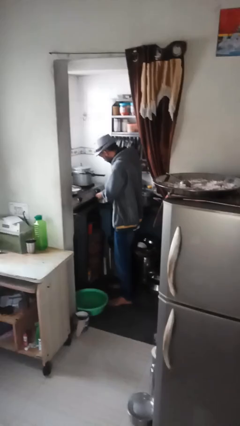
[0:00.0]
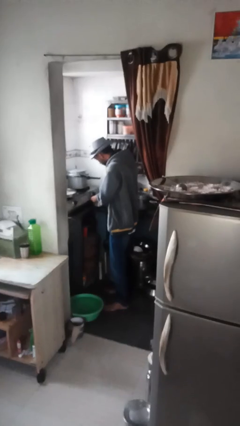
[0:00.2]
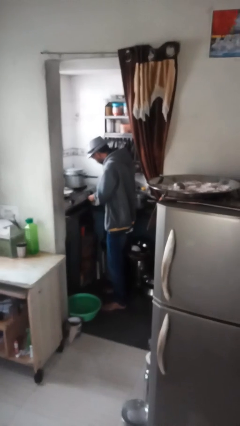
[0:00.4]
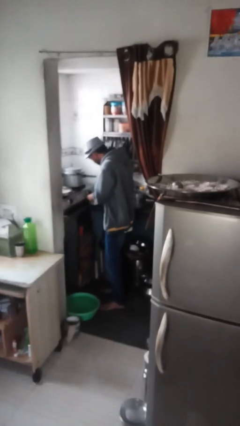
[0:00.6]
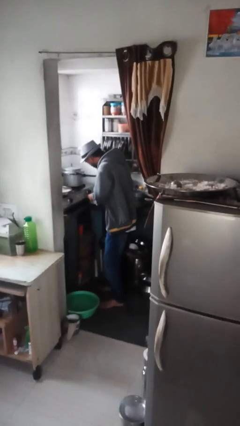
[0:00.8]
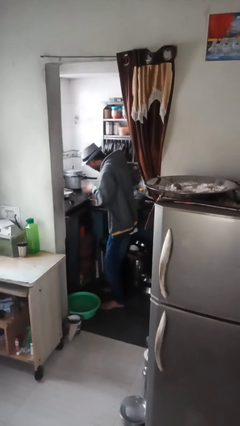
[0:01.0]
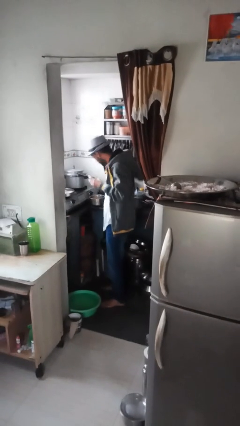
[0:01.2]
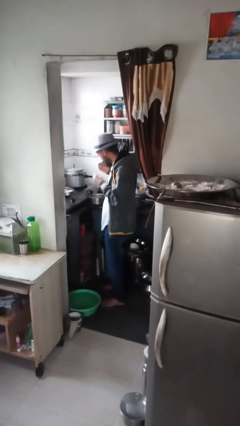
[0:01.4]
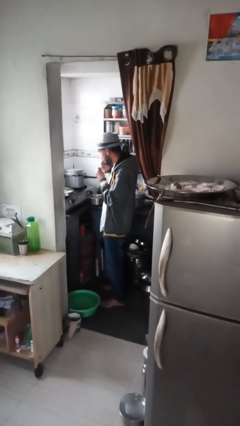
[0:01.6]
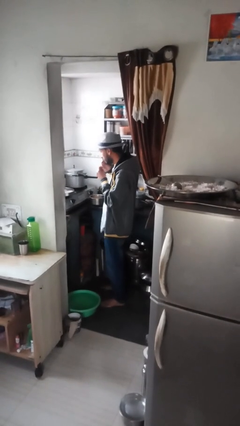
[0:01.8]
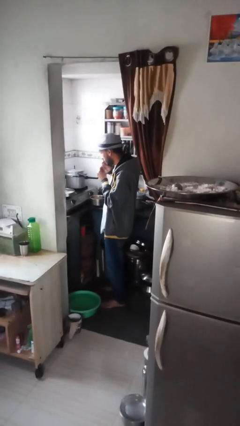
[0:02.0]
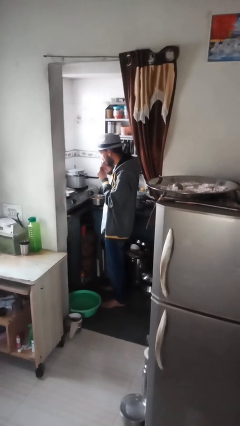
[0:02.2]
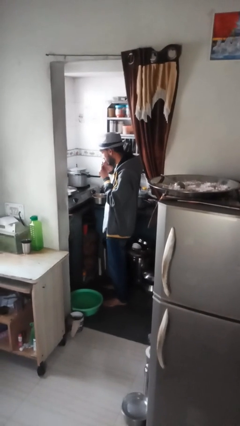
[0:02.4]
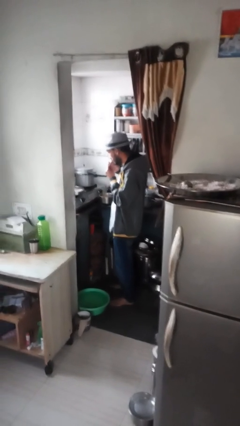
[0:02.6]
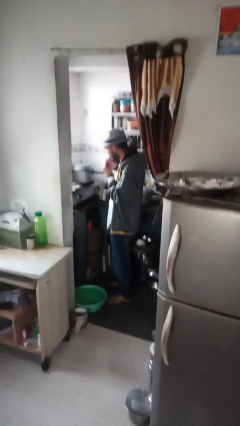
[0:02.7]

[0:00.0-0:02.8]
person burns hand

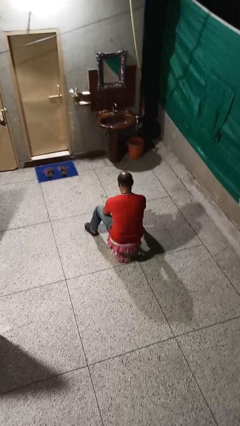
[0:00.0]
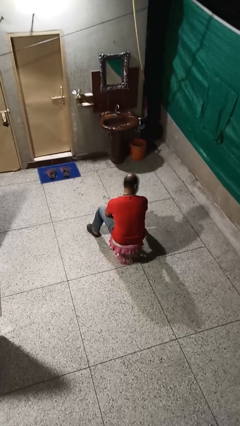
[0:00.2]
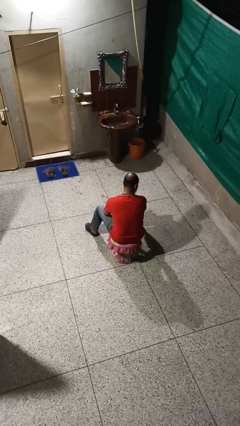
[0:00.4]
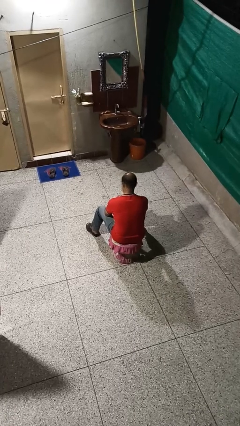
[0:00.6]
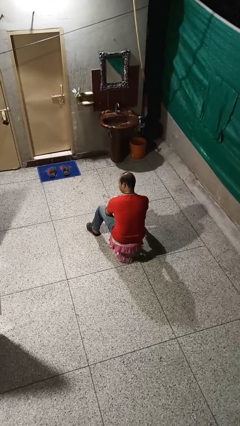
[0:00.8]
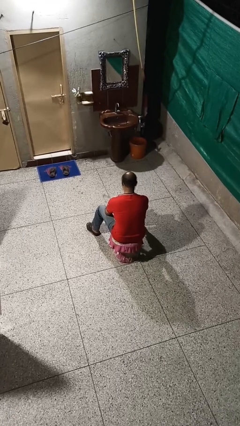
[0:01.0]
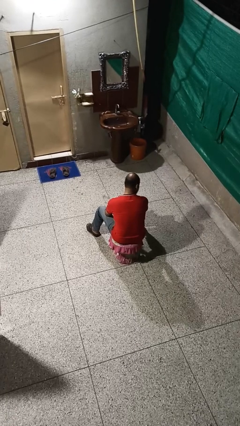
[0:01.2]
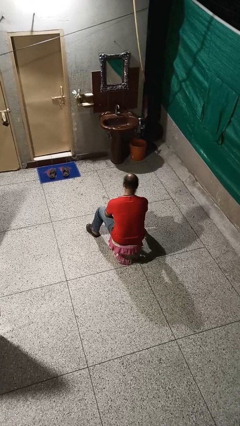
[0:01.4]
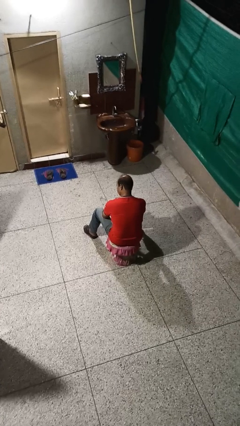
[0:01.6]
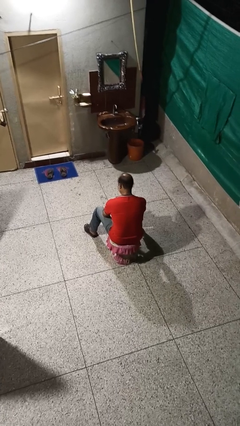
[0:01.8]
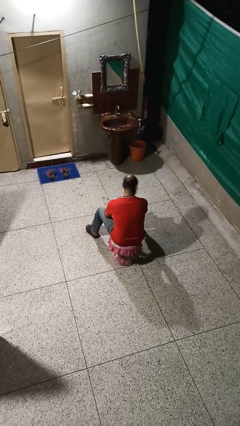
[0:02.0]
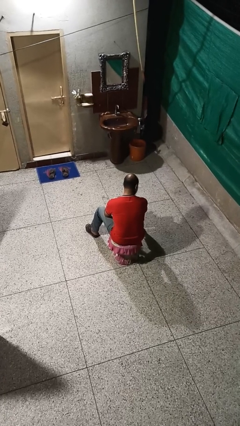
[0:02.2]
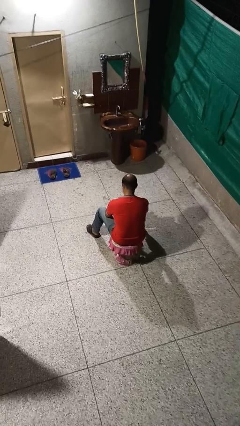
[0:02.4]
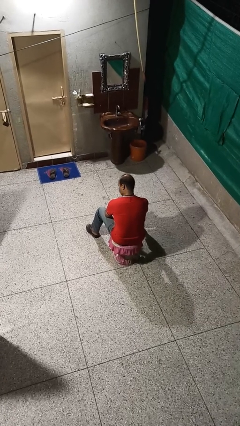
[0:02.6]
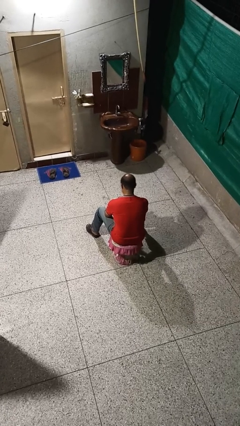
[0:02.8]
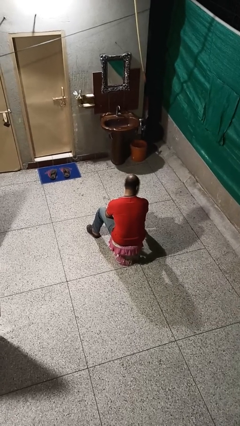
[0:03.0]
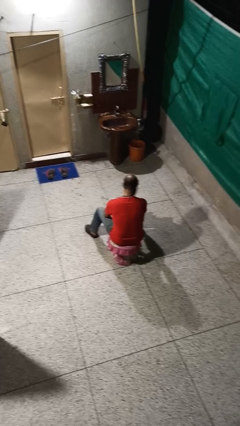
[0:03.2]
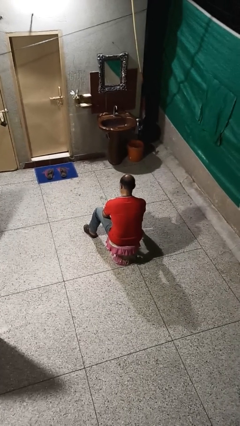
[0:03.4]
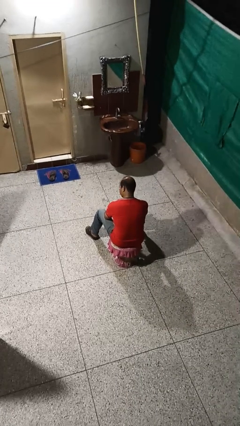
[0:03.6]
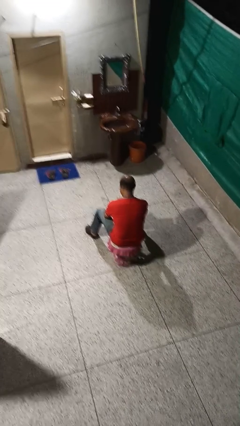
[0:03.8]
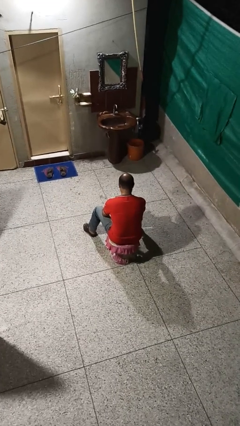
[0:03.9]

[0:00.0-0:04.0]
person shakes head

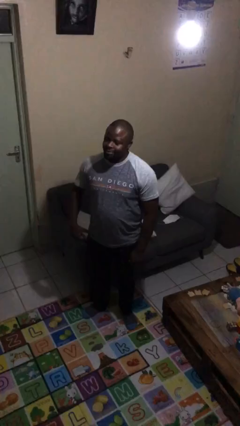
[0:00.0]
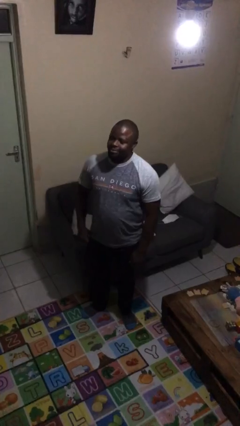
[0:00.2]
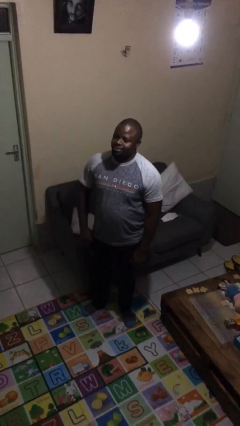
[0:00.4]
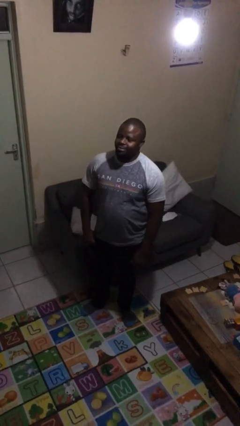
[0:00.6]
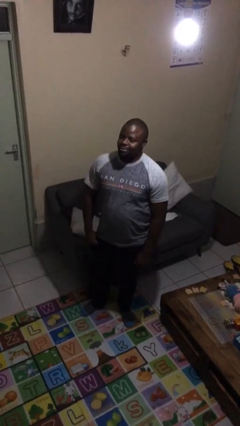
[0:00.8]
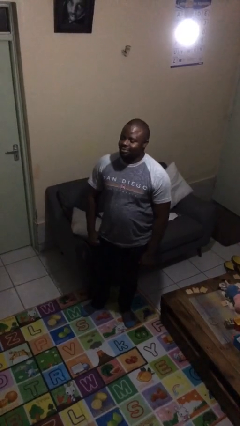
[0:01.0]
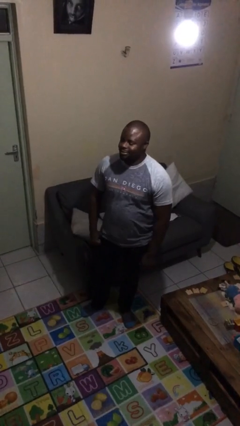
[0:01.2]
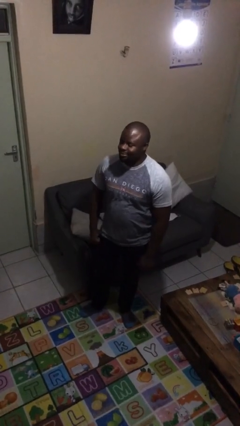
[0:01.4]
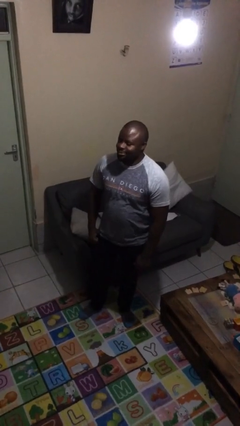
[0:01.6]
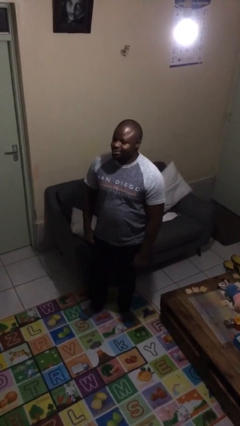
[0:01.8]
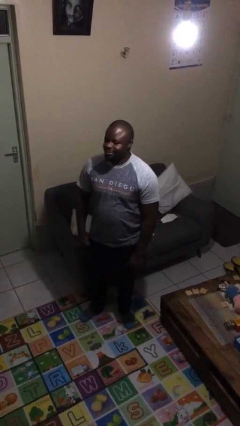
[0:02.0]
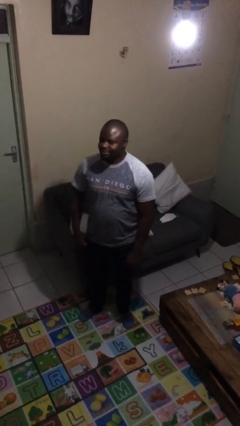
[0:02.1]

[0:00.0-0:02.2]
person gestures thumbs up

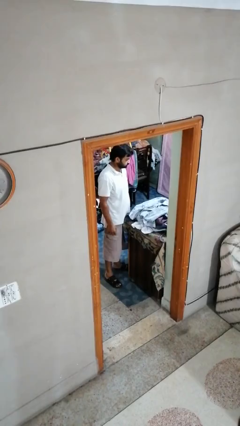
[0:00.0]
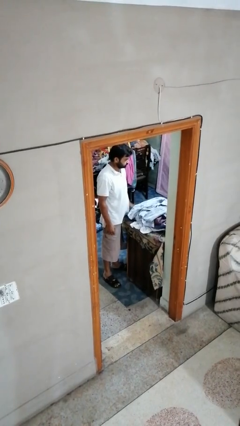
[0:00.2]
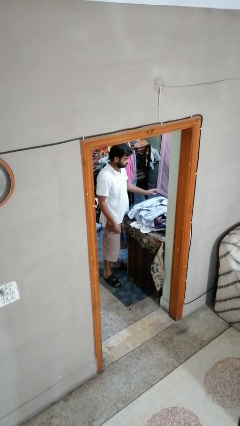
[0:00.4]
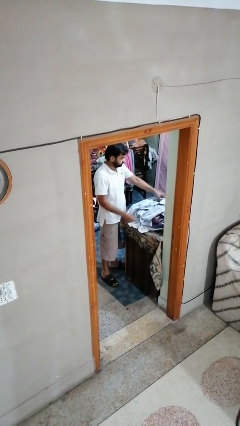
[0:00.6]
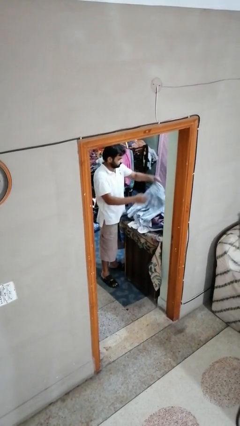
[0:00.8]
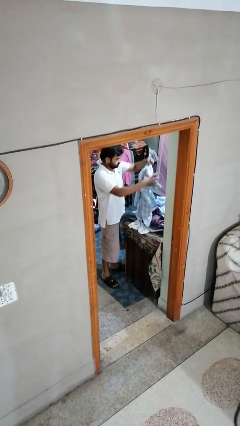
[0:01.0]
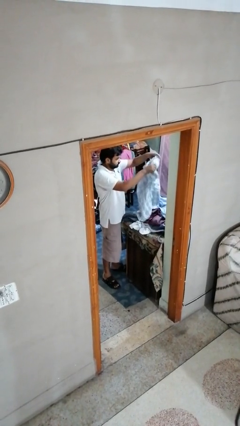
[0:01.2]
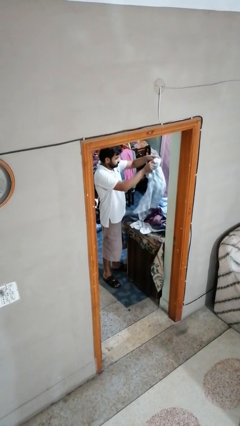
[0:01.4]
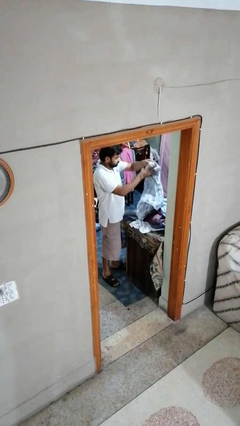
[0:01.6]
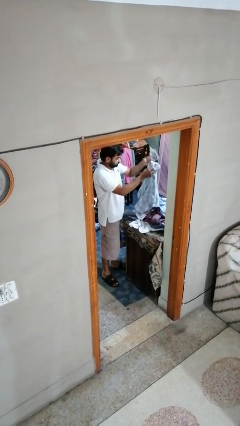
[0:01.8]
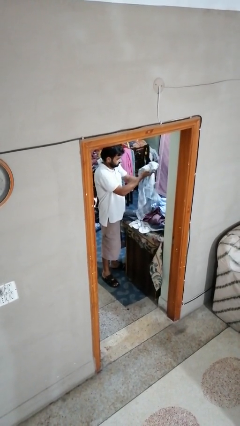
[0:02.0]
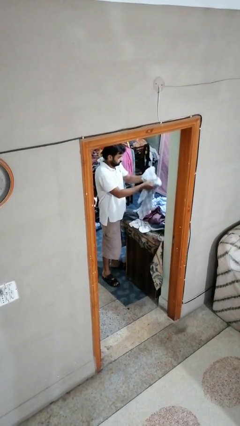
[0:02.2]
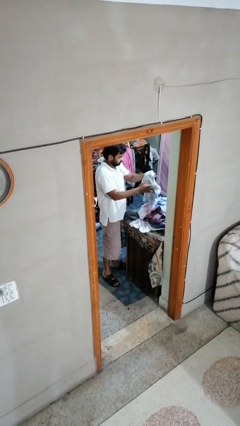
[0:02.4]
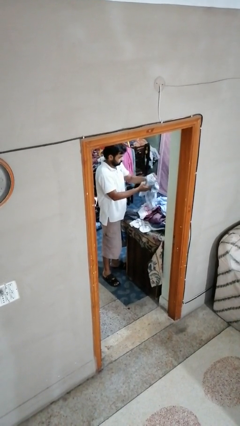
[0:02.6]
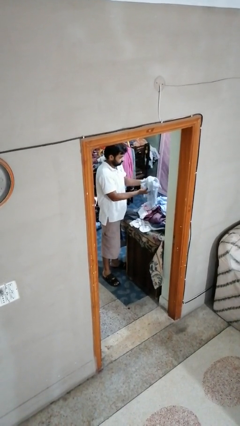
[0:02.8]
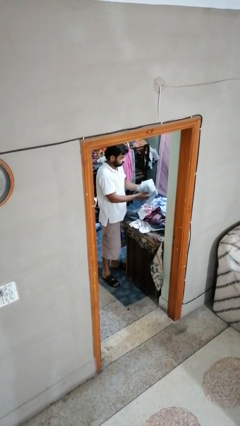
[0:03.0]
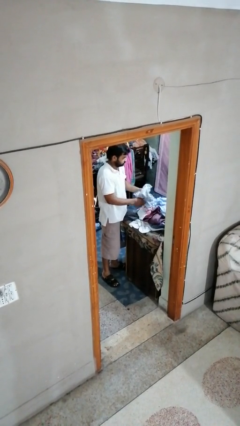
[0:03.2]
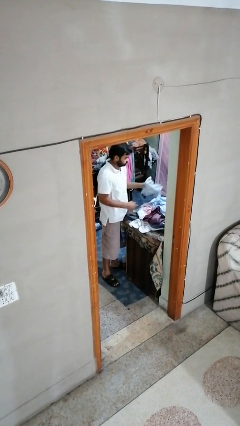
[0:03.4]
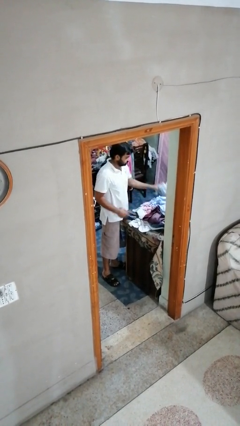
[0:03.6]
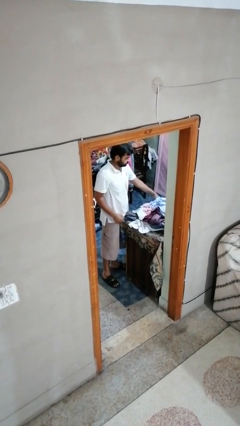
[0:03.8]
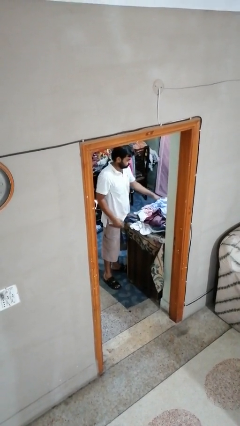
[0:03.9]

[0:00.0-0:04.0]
person folds shirt

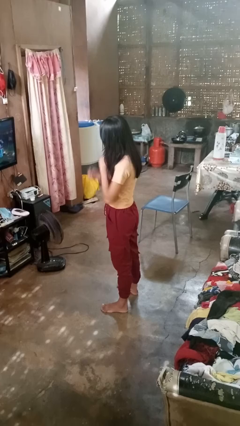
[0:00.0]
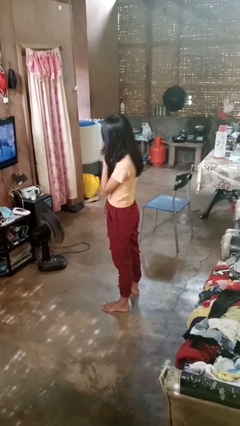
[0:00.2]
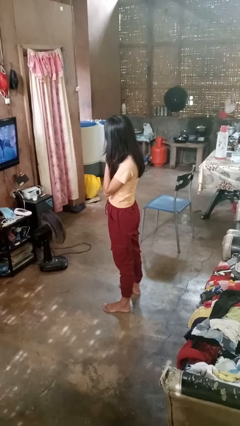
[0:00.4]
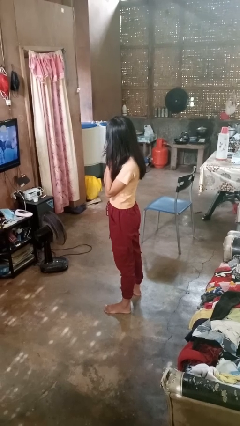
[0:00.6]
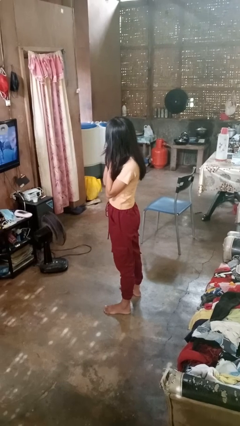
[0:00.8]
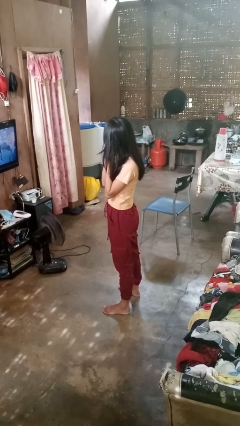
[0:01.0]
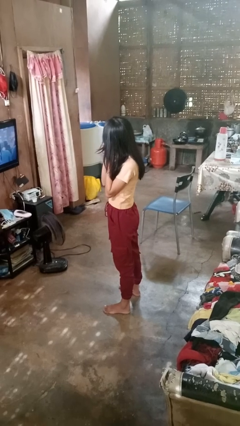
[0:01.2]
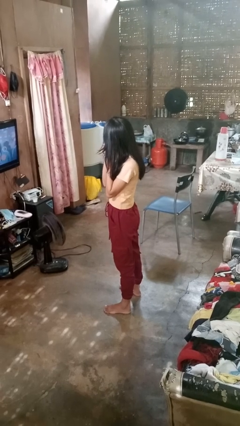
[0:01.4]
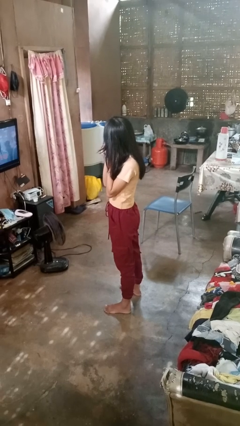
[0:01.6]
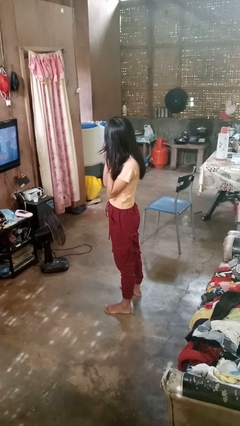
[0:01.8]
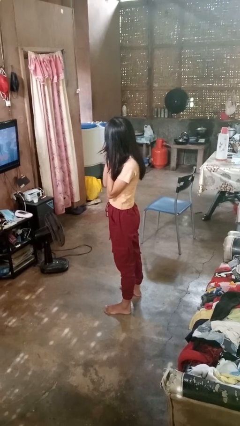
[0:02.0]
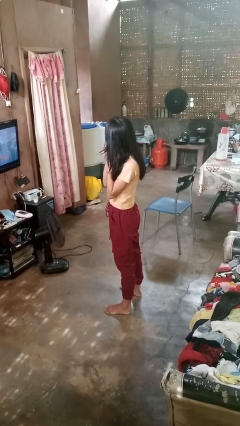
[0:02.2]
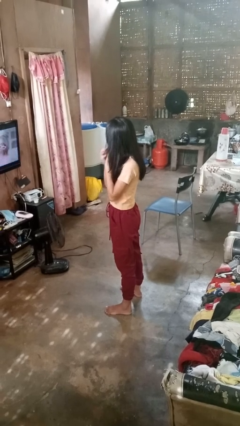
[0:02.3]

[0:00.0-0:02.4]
person puts on earrings

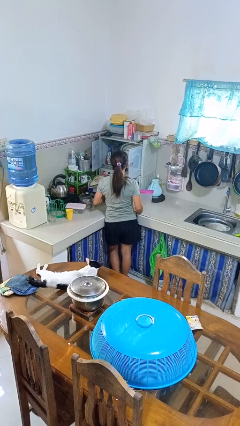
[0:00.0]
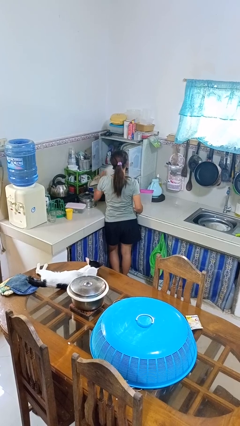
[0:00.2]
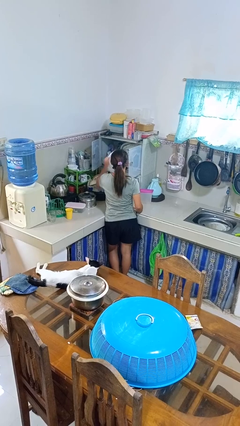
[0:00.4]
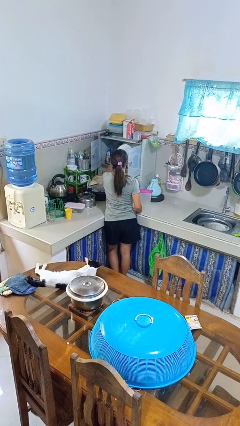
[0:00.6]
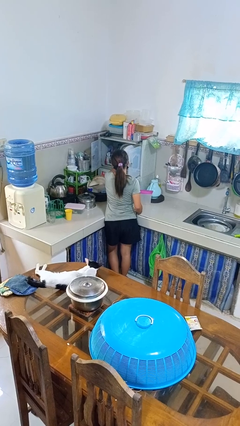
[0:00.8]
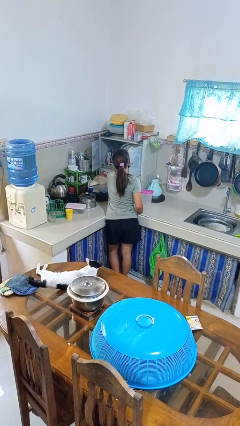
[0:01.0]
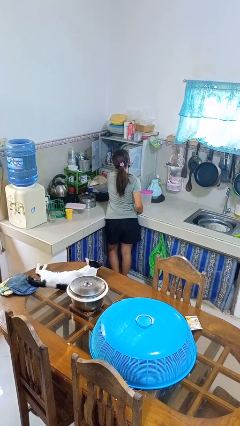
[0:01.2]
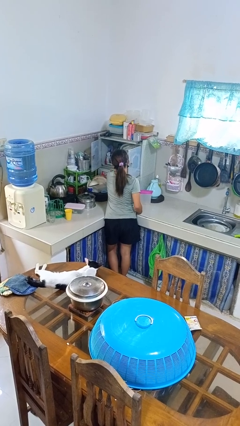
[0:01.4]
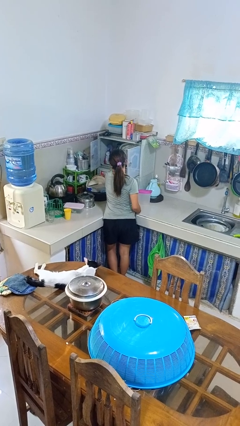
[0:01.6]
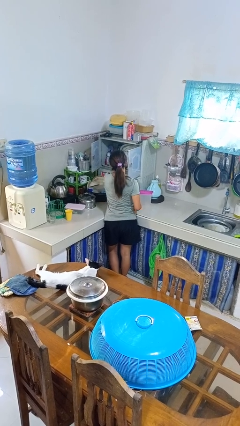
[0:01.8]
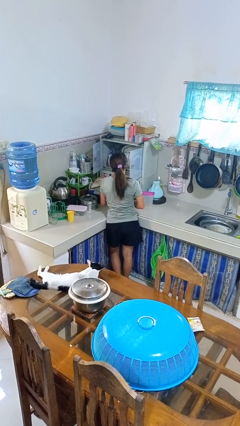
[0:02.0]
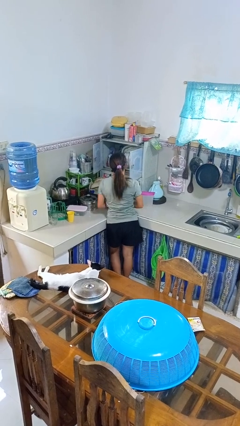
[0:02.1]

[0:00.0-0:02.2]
person puts object into kitchen drawer
